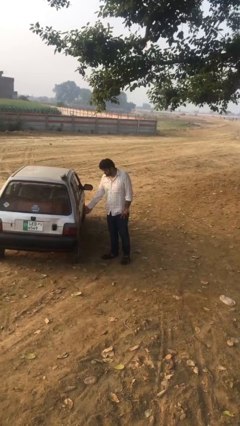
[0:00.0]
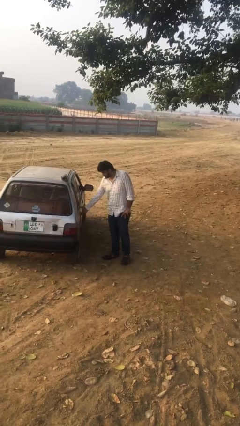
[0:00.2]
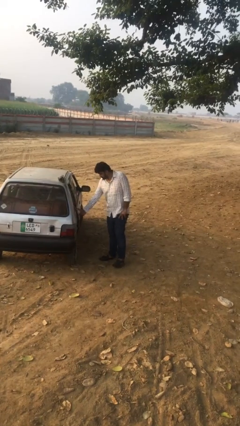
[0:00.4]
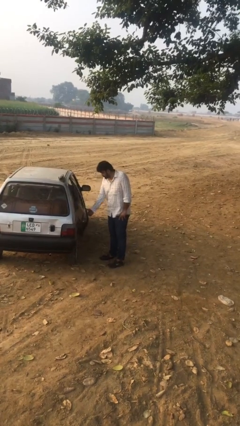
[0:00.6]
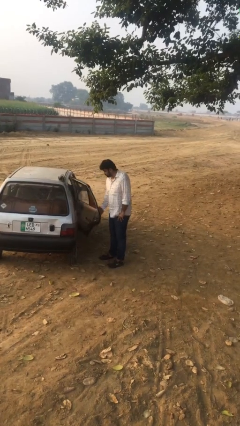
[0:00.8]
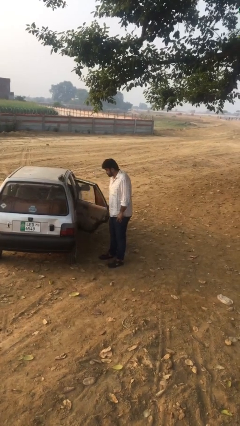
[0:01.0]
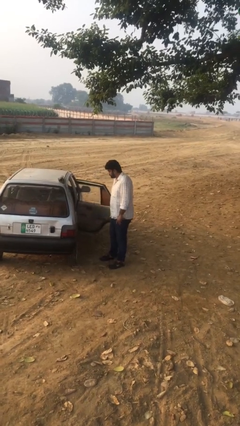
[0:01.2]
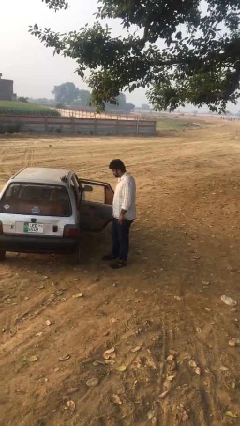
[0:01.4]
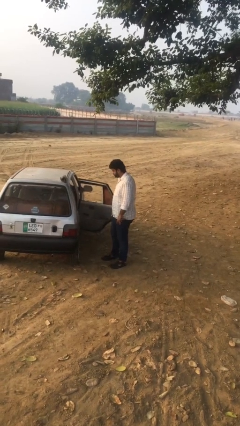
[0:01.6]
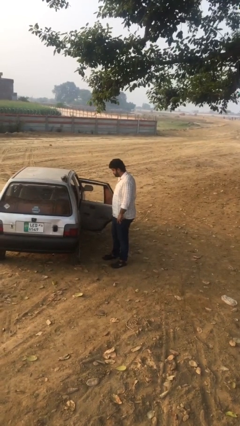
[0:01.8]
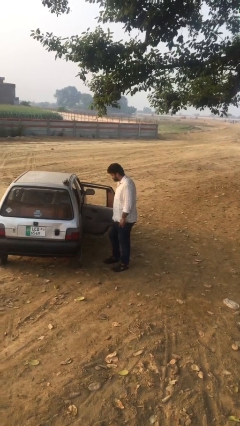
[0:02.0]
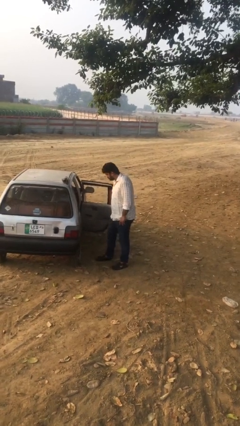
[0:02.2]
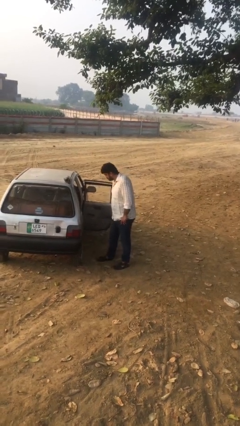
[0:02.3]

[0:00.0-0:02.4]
person opens car door

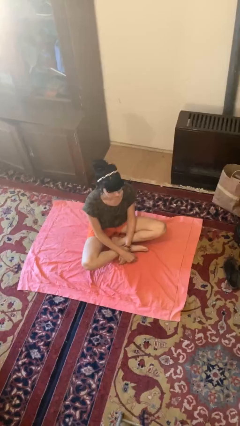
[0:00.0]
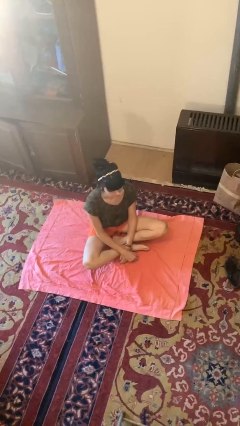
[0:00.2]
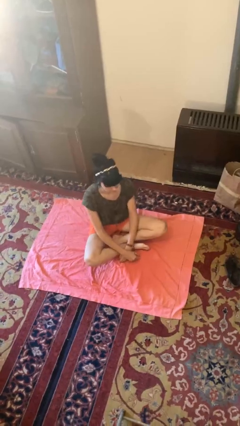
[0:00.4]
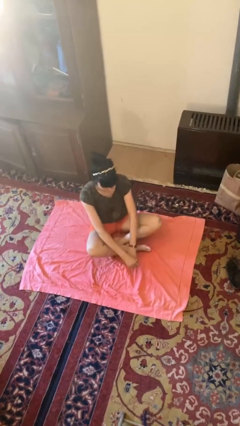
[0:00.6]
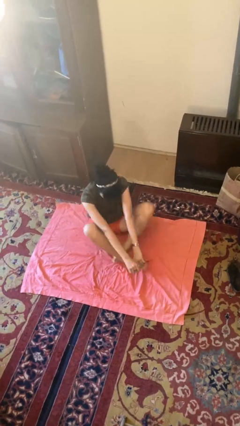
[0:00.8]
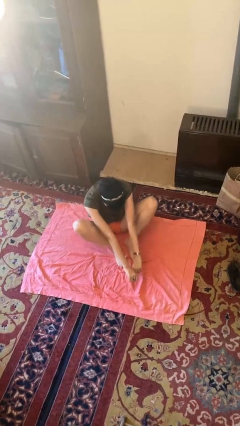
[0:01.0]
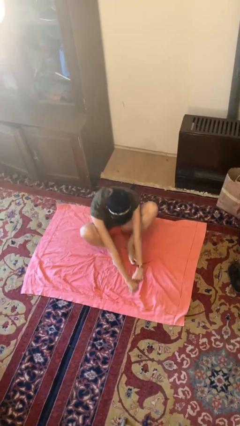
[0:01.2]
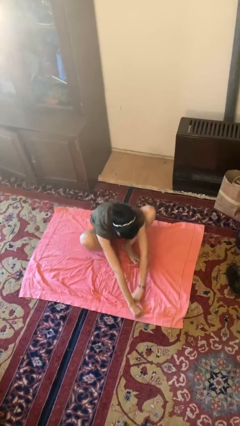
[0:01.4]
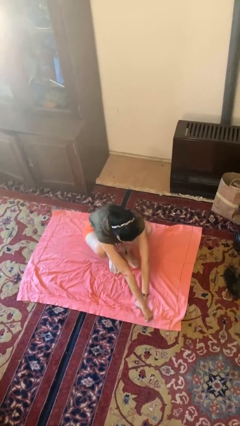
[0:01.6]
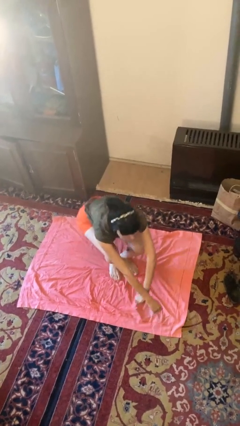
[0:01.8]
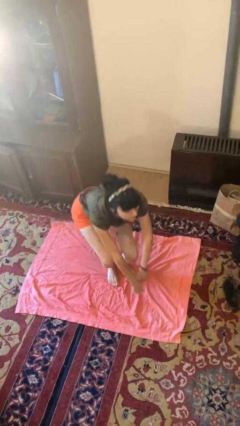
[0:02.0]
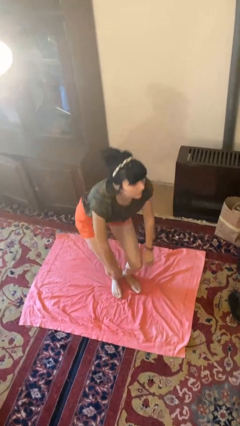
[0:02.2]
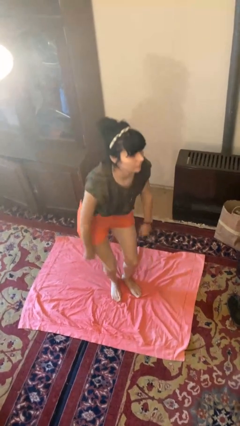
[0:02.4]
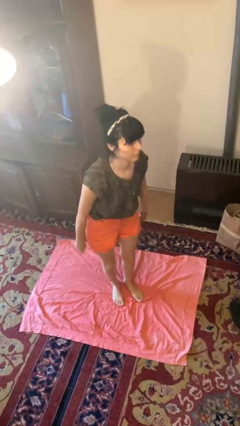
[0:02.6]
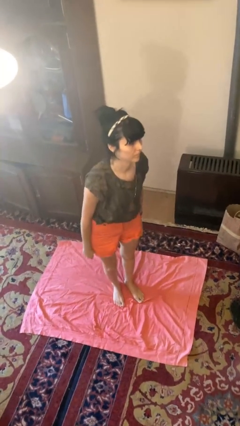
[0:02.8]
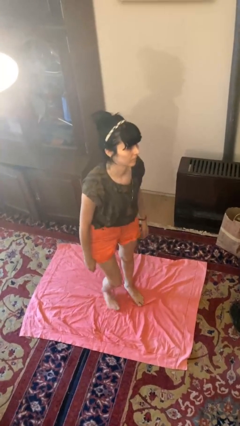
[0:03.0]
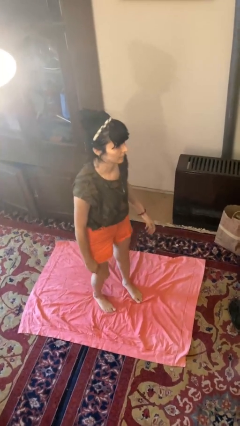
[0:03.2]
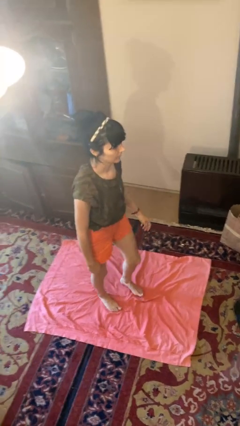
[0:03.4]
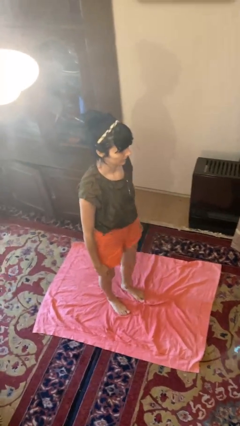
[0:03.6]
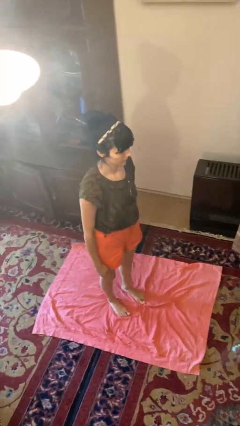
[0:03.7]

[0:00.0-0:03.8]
person stands up from floor

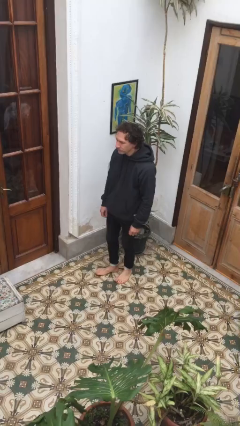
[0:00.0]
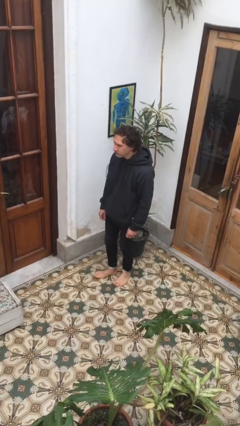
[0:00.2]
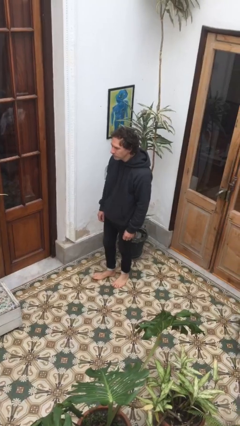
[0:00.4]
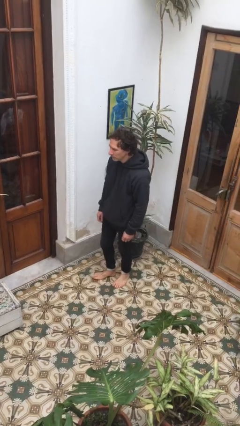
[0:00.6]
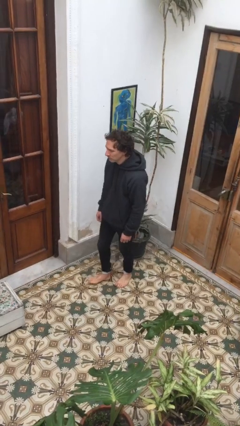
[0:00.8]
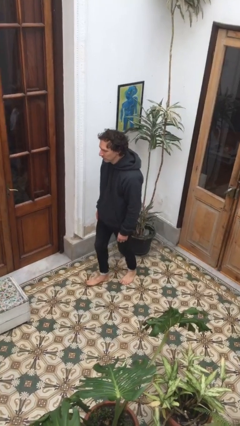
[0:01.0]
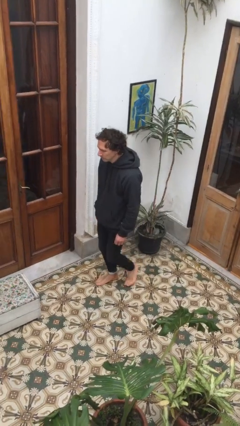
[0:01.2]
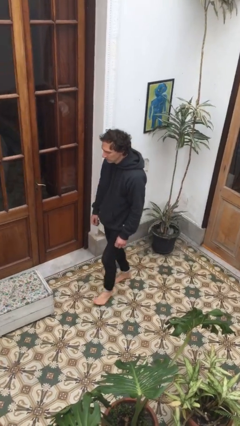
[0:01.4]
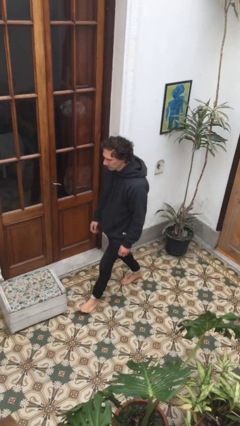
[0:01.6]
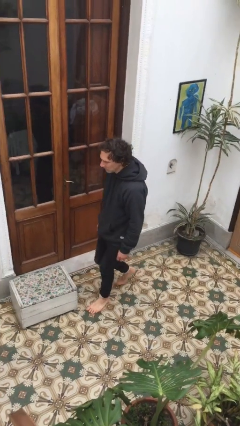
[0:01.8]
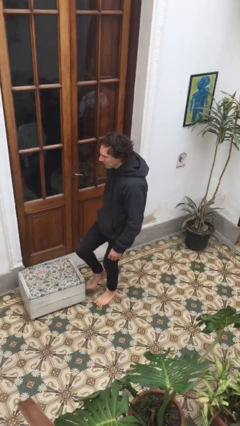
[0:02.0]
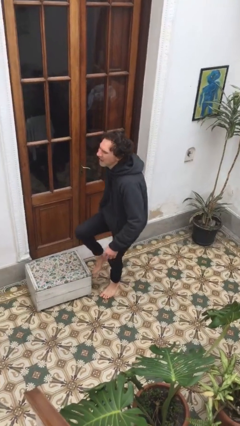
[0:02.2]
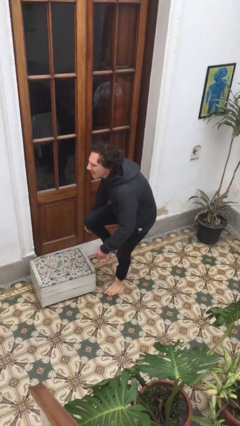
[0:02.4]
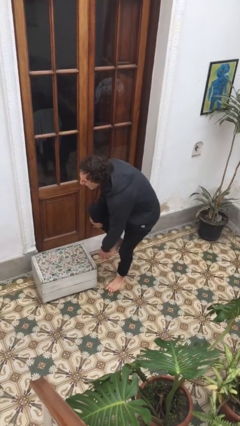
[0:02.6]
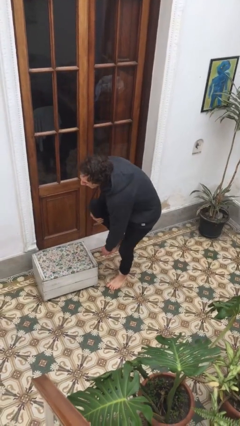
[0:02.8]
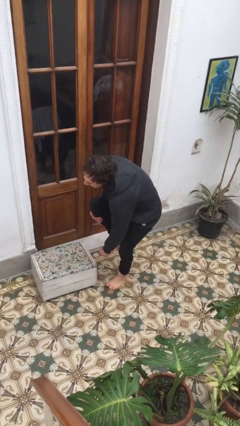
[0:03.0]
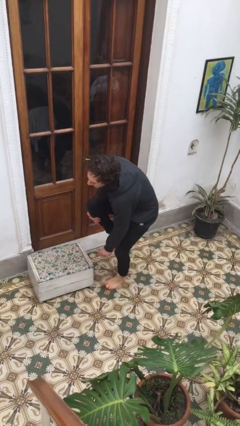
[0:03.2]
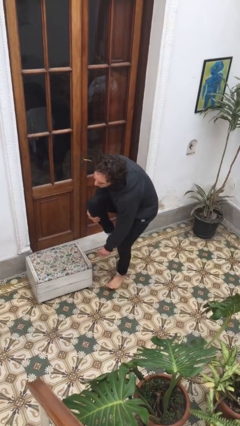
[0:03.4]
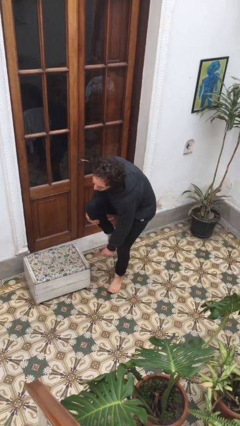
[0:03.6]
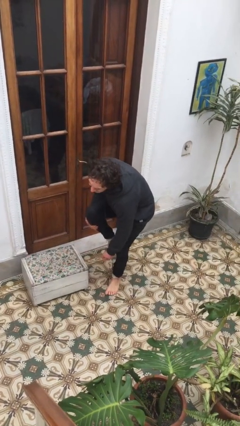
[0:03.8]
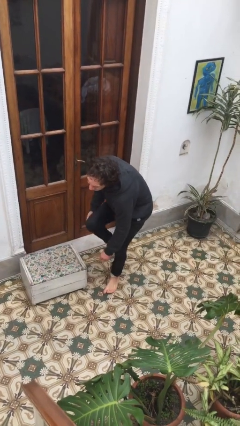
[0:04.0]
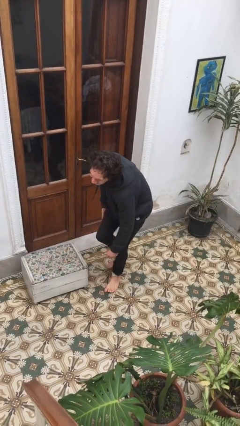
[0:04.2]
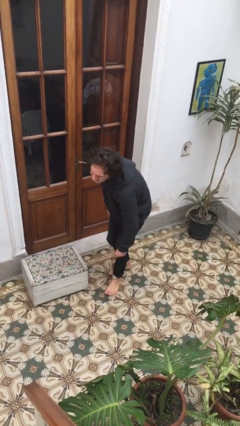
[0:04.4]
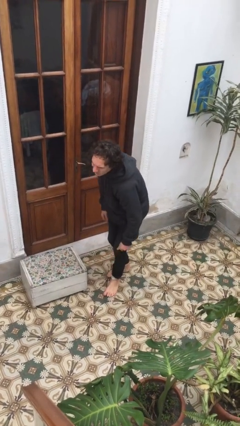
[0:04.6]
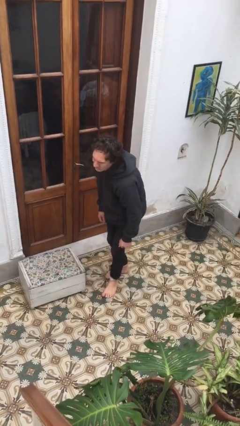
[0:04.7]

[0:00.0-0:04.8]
person stubs toe

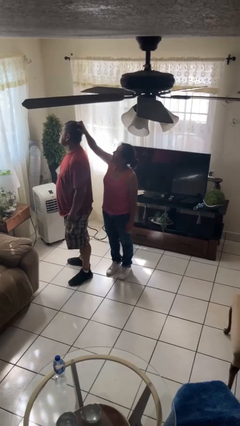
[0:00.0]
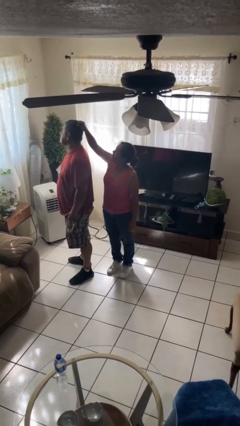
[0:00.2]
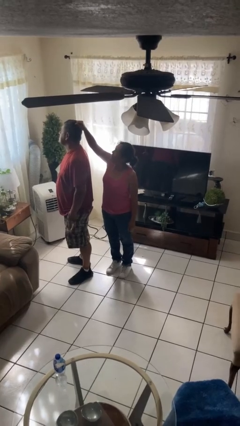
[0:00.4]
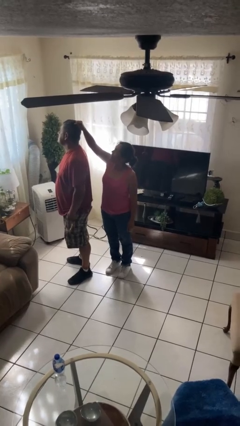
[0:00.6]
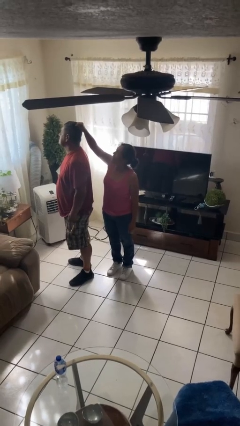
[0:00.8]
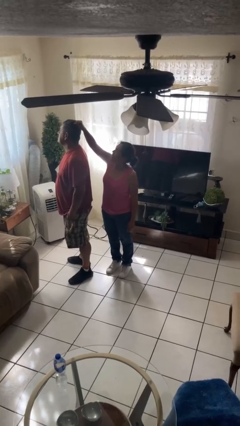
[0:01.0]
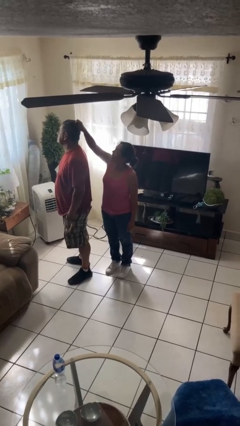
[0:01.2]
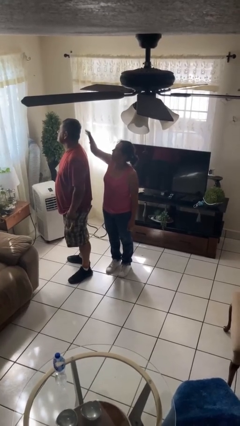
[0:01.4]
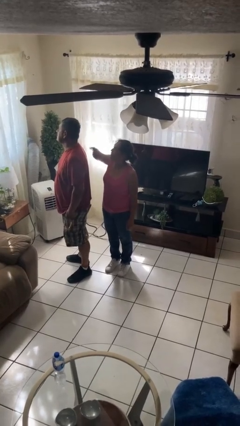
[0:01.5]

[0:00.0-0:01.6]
person grabs person by hair

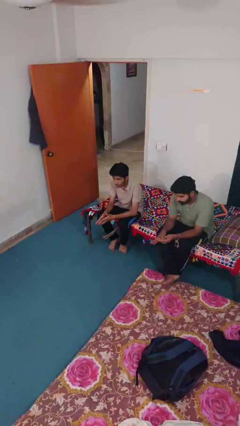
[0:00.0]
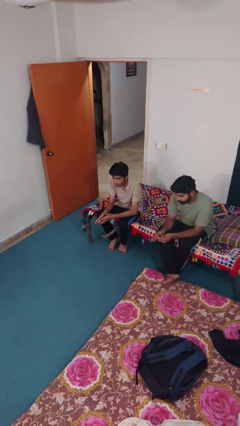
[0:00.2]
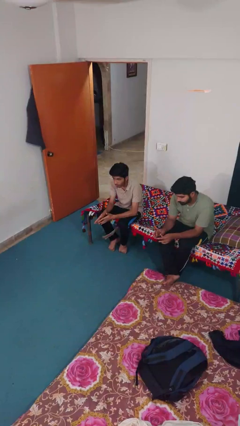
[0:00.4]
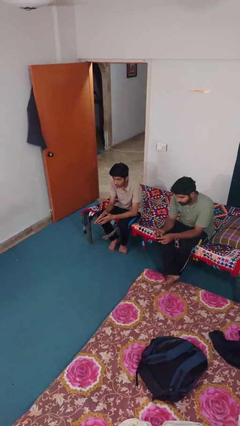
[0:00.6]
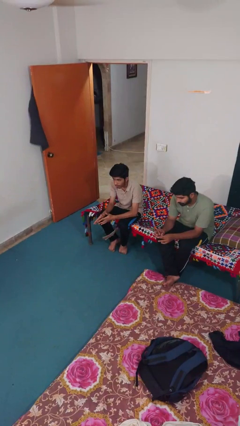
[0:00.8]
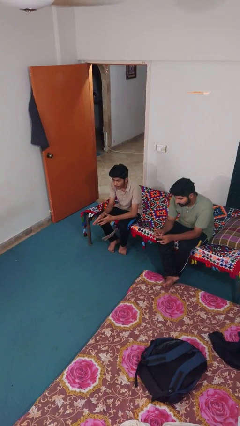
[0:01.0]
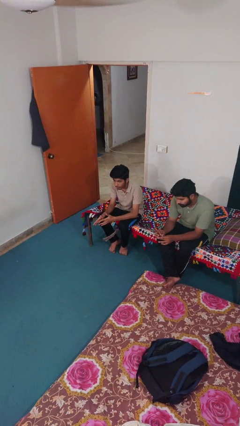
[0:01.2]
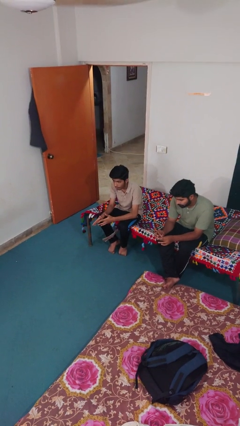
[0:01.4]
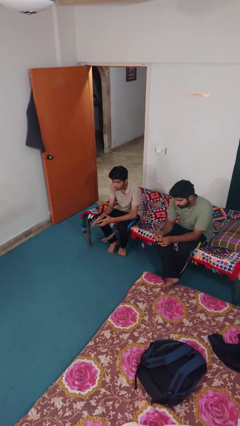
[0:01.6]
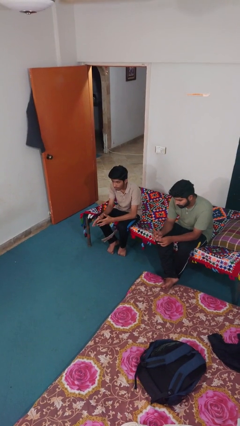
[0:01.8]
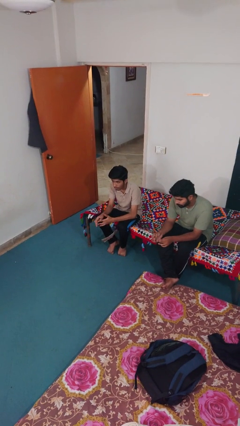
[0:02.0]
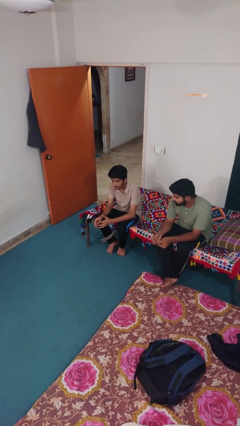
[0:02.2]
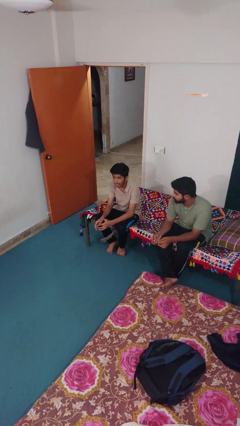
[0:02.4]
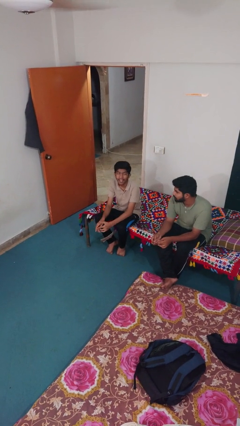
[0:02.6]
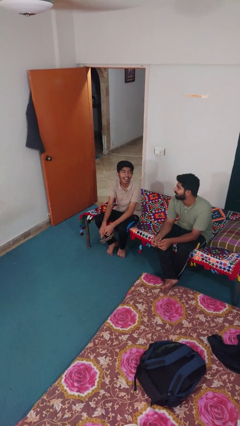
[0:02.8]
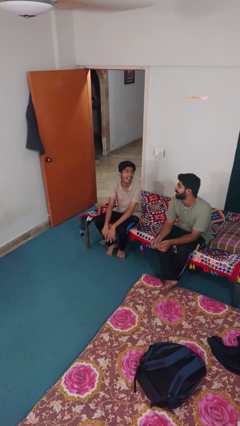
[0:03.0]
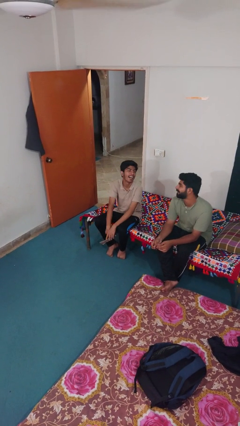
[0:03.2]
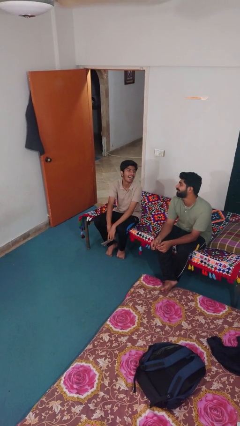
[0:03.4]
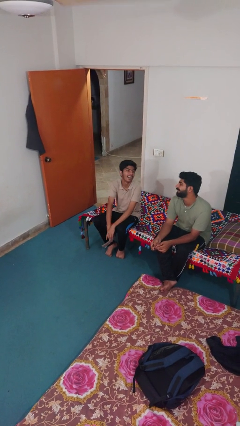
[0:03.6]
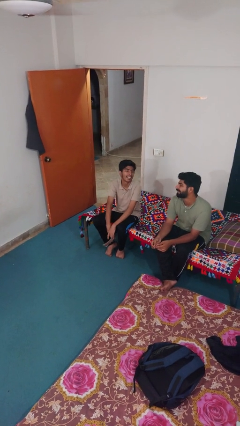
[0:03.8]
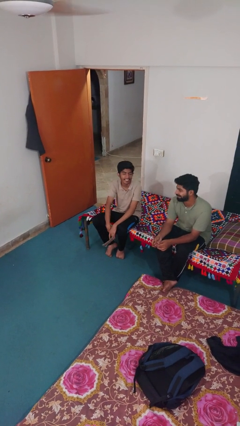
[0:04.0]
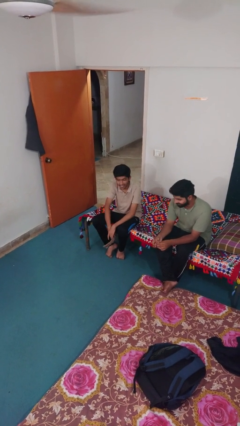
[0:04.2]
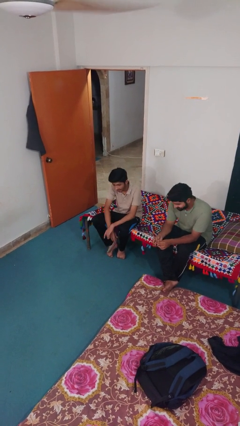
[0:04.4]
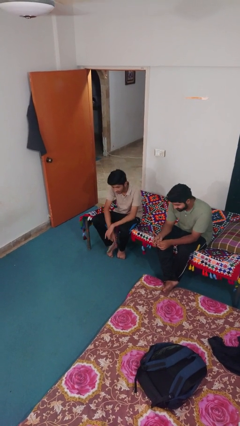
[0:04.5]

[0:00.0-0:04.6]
person laughs with person

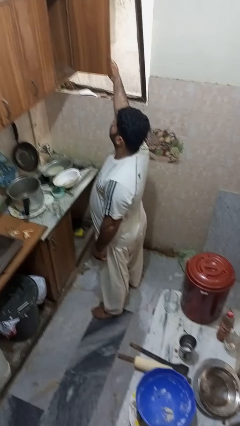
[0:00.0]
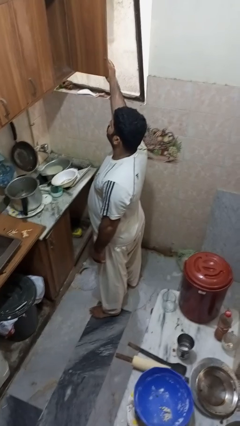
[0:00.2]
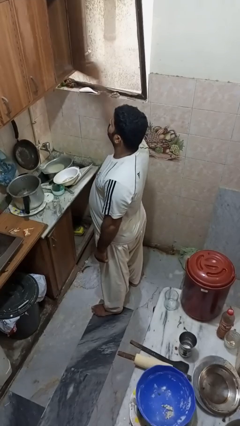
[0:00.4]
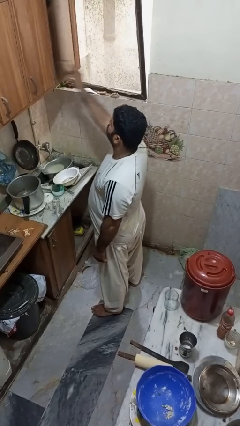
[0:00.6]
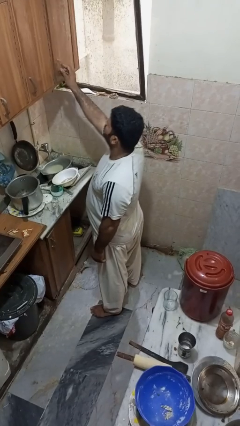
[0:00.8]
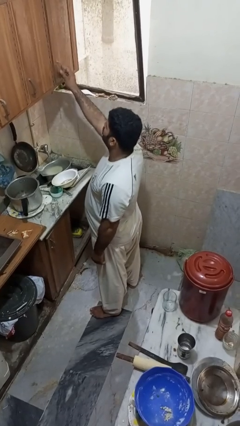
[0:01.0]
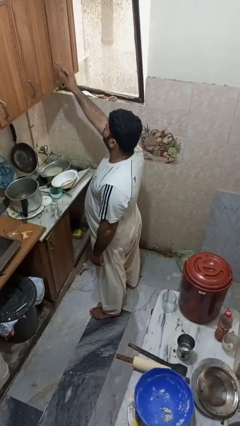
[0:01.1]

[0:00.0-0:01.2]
person closes cabinet
